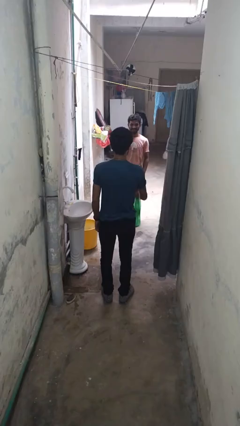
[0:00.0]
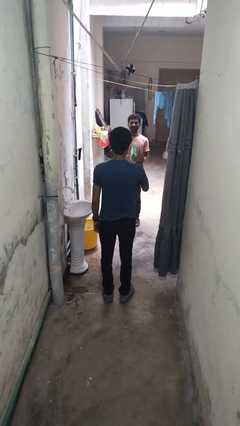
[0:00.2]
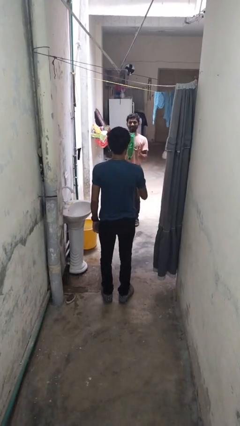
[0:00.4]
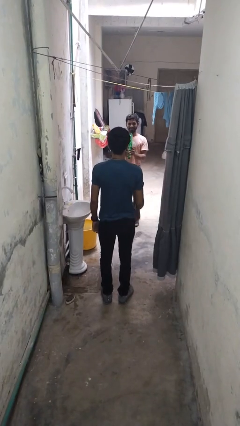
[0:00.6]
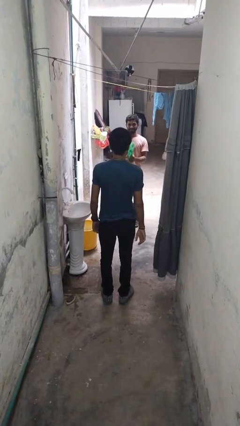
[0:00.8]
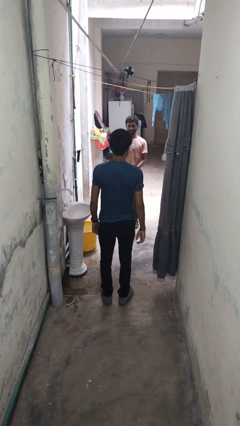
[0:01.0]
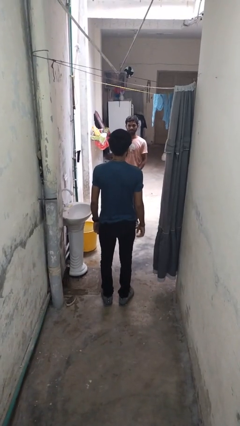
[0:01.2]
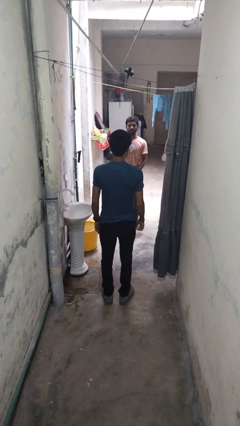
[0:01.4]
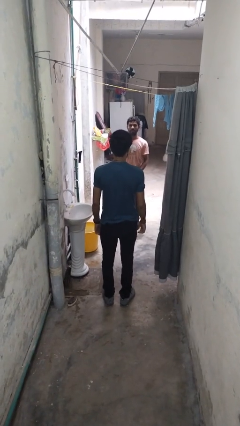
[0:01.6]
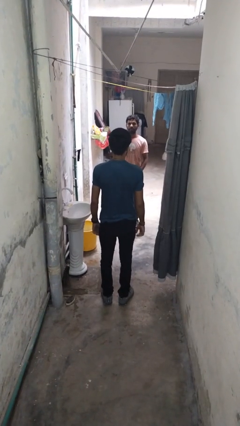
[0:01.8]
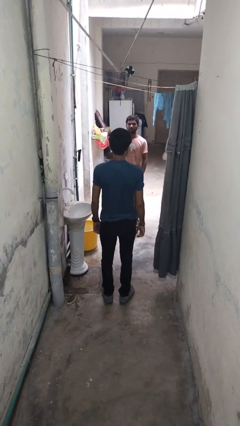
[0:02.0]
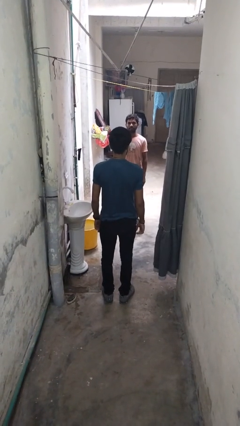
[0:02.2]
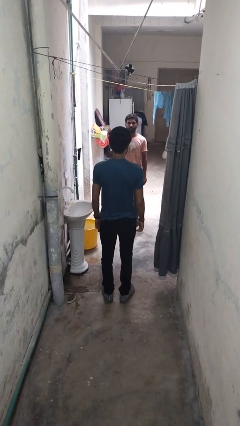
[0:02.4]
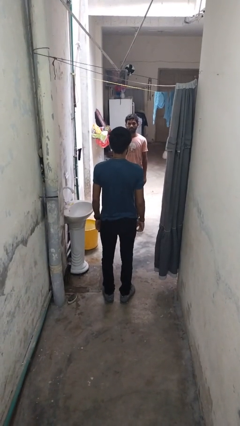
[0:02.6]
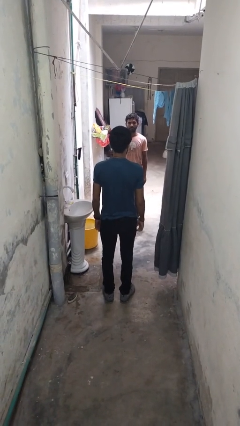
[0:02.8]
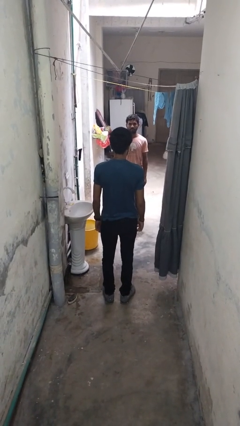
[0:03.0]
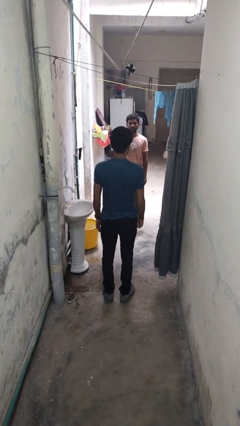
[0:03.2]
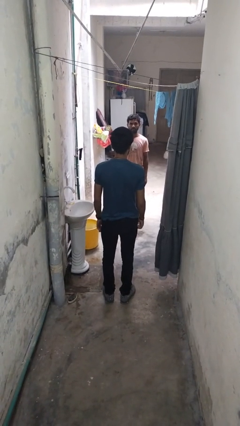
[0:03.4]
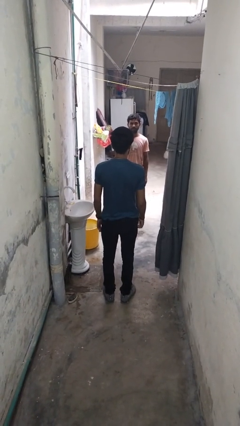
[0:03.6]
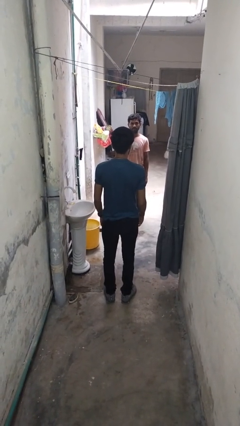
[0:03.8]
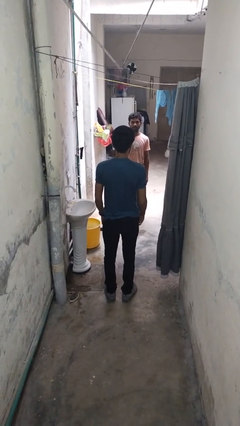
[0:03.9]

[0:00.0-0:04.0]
person throws object to person

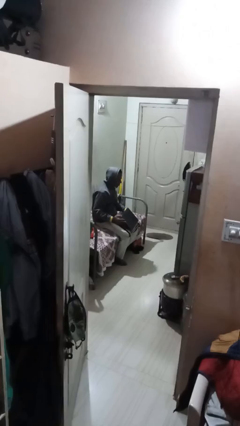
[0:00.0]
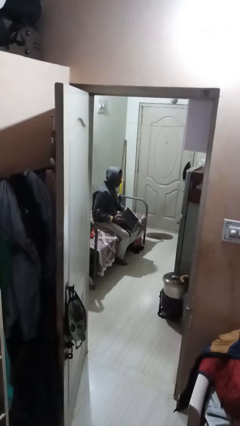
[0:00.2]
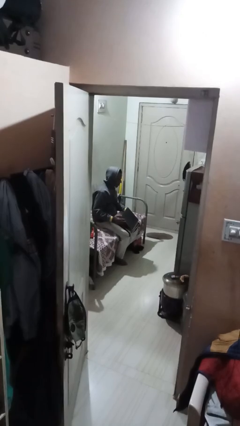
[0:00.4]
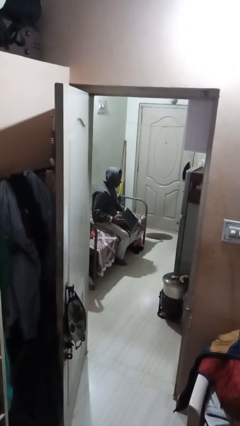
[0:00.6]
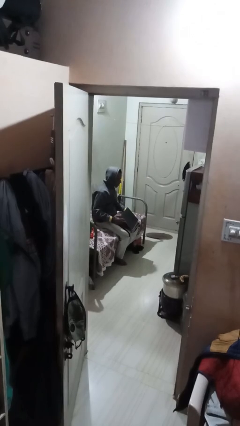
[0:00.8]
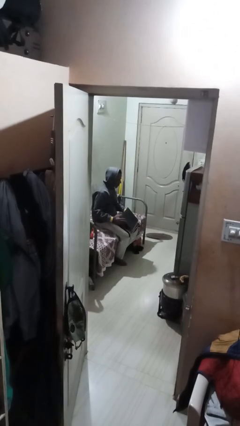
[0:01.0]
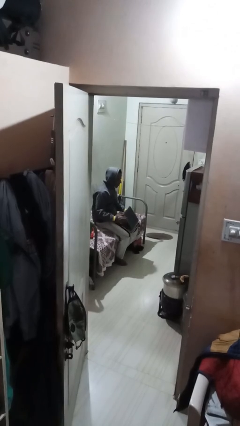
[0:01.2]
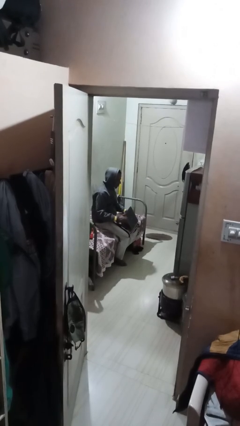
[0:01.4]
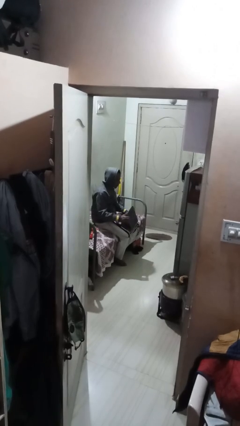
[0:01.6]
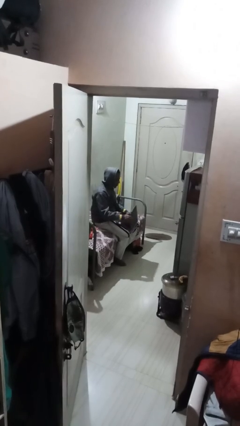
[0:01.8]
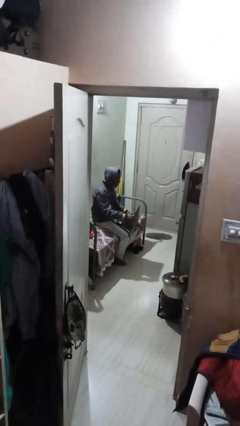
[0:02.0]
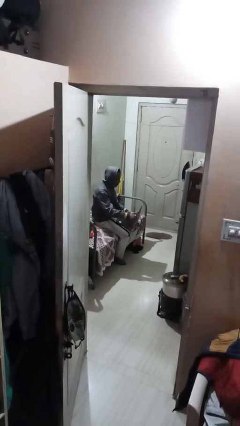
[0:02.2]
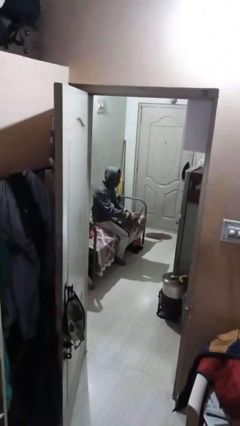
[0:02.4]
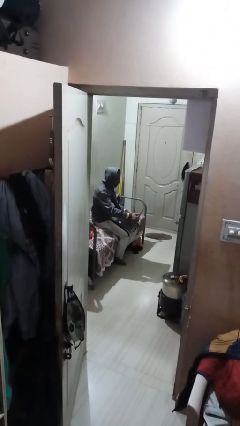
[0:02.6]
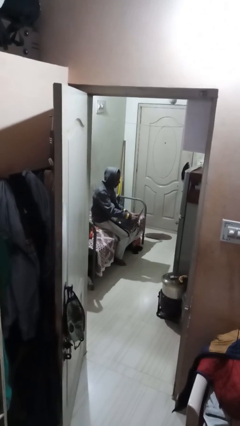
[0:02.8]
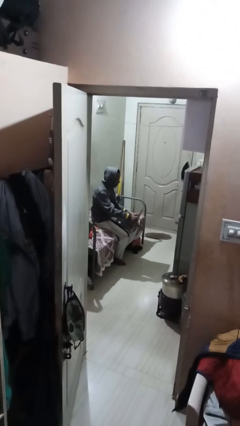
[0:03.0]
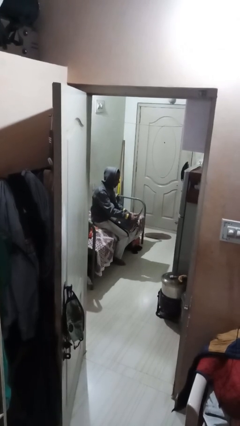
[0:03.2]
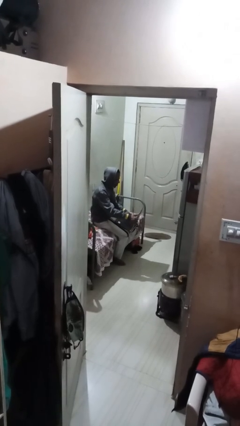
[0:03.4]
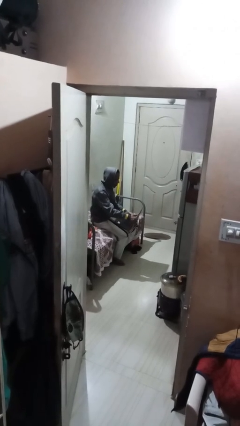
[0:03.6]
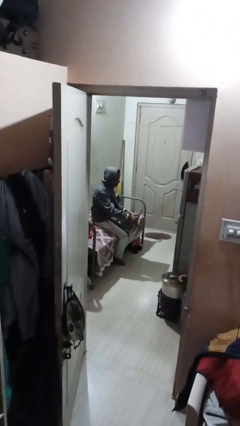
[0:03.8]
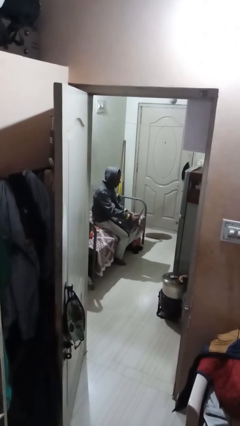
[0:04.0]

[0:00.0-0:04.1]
person interacts with laptop

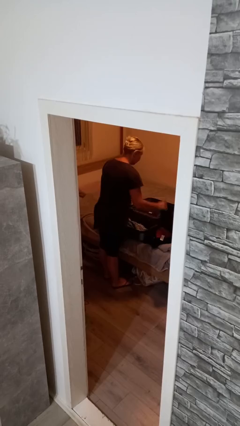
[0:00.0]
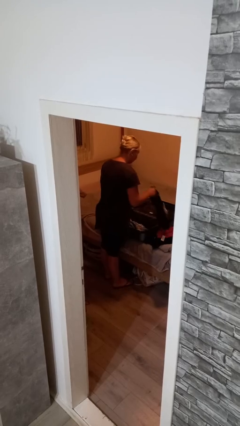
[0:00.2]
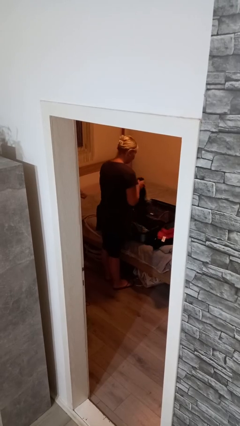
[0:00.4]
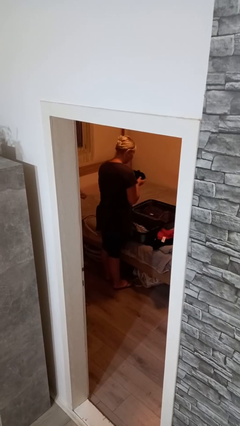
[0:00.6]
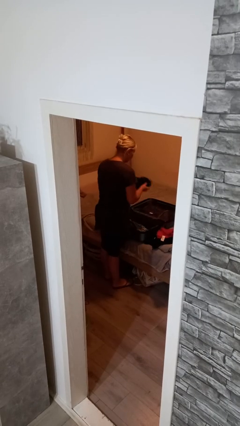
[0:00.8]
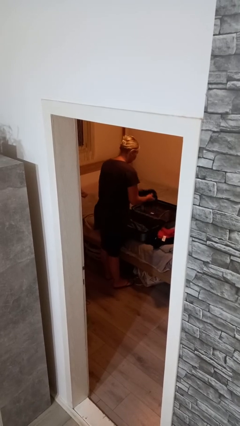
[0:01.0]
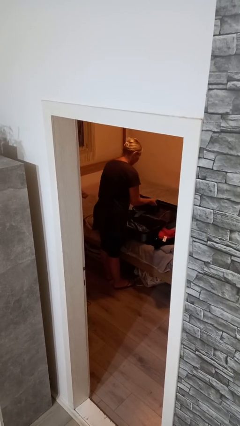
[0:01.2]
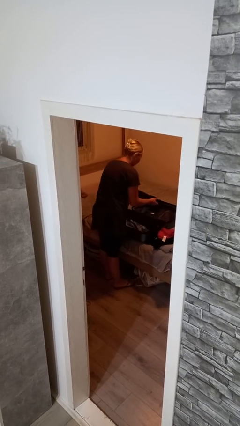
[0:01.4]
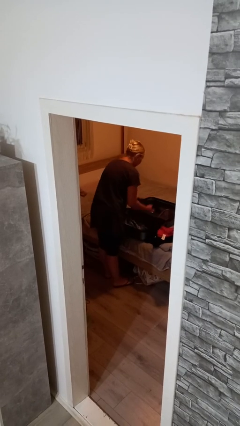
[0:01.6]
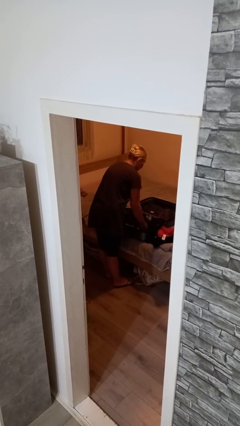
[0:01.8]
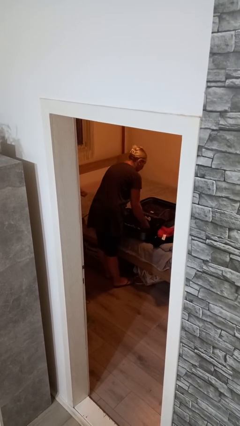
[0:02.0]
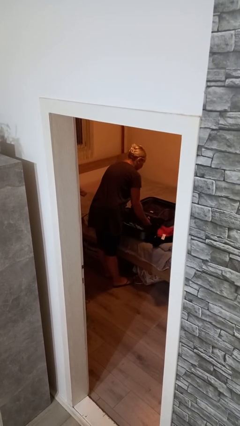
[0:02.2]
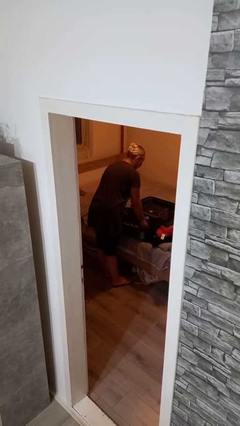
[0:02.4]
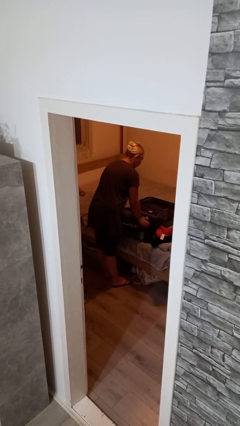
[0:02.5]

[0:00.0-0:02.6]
person loads clothes into suitcase

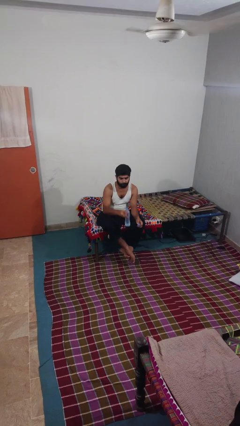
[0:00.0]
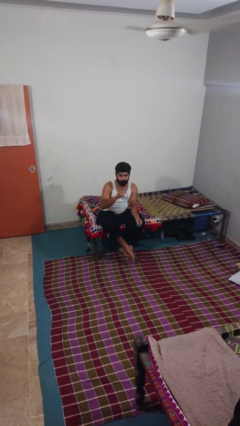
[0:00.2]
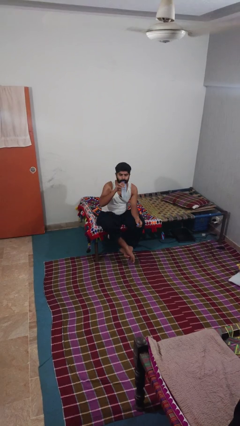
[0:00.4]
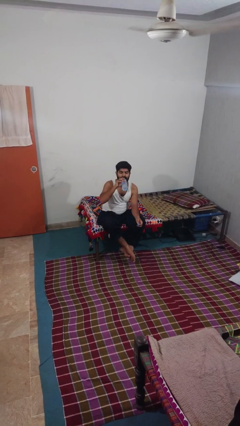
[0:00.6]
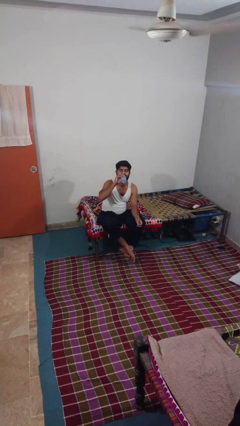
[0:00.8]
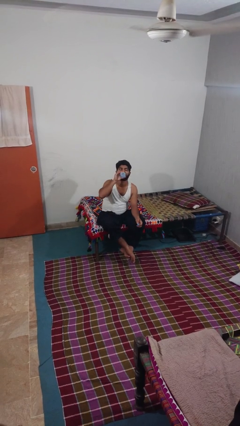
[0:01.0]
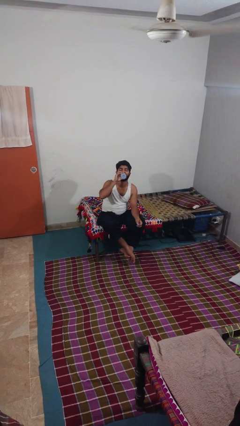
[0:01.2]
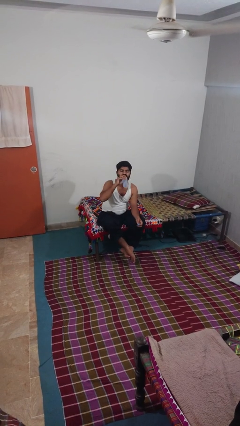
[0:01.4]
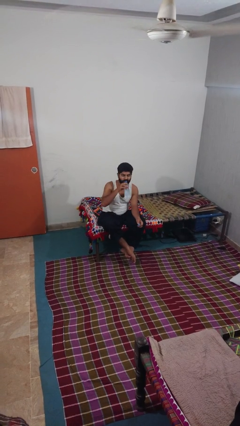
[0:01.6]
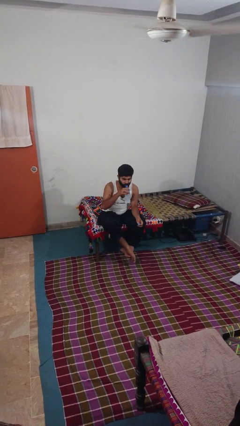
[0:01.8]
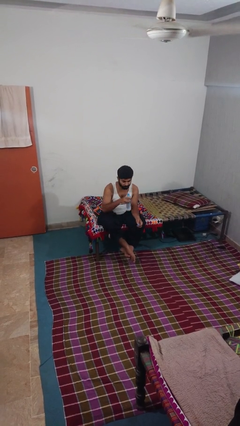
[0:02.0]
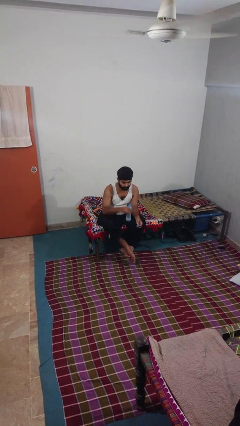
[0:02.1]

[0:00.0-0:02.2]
person drinks from bottle

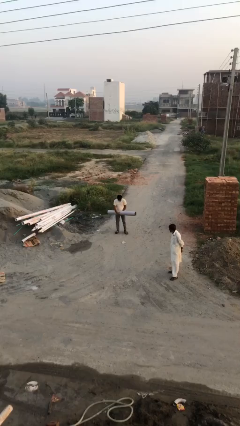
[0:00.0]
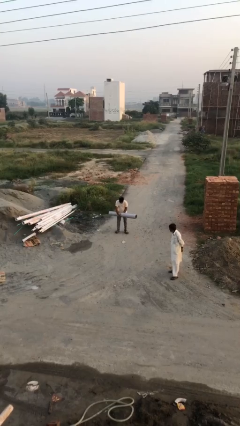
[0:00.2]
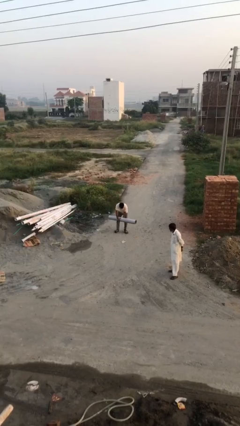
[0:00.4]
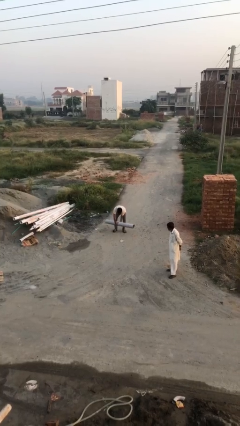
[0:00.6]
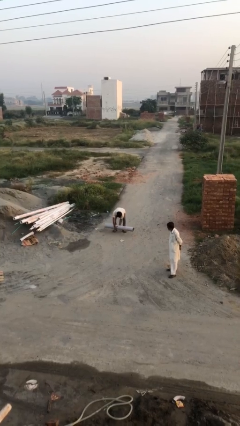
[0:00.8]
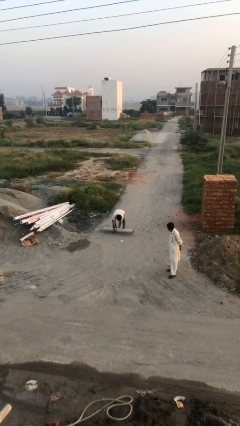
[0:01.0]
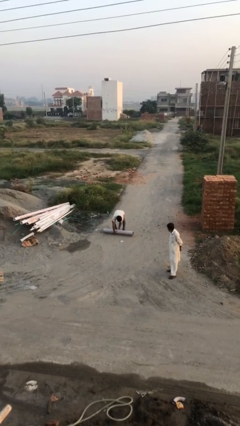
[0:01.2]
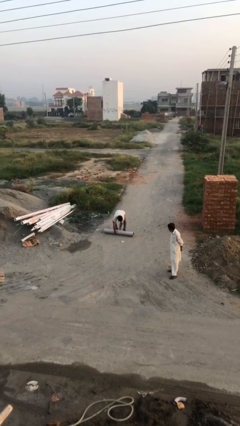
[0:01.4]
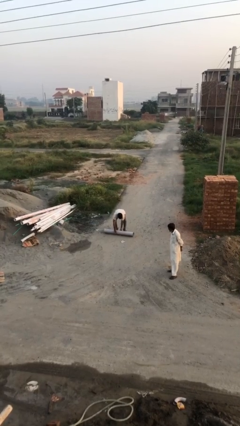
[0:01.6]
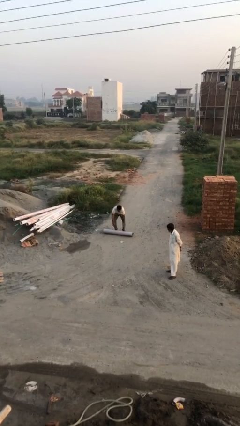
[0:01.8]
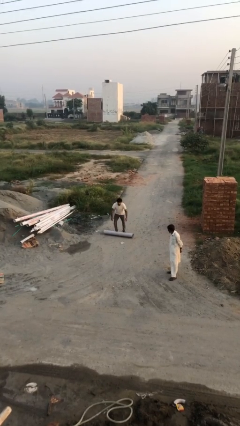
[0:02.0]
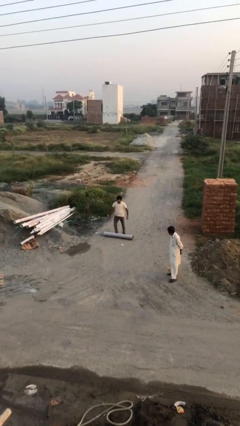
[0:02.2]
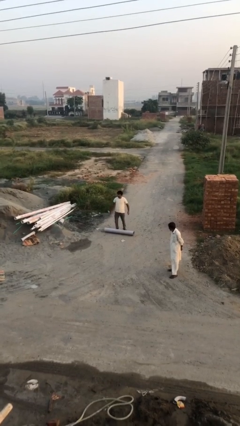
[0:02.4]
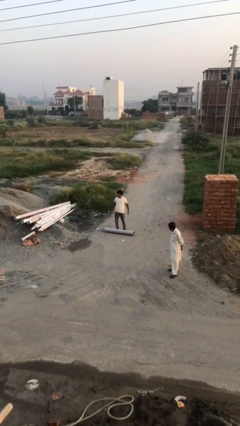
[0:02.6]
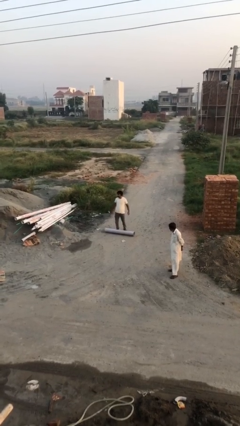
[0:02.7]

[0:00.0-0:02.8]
person puts down object on floor

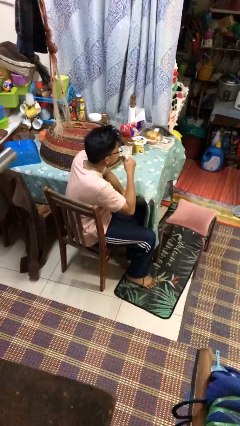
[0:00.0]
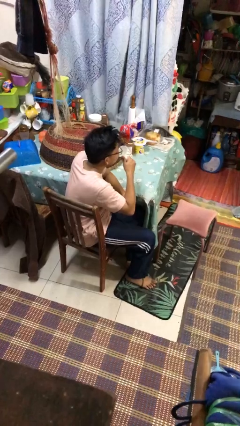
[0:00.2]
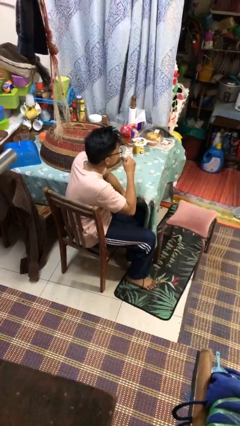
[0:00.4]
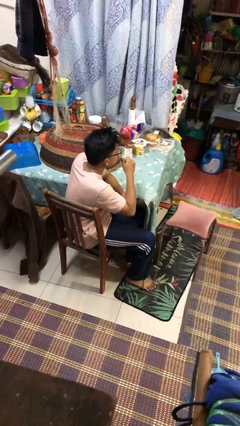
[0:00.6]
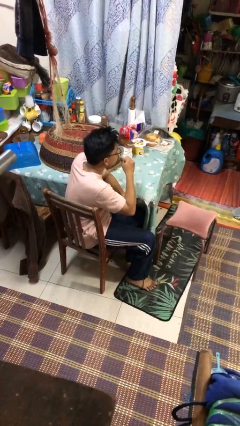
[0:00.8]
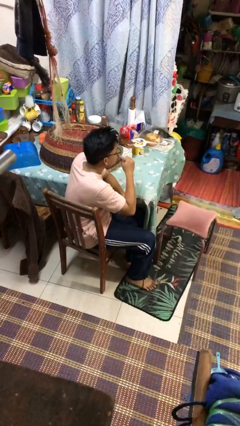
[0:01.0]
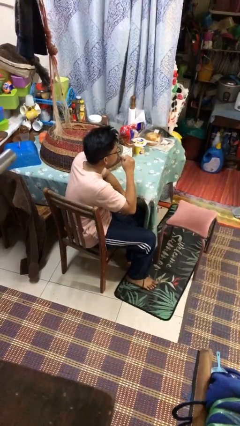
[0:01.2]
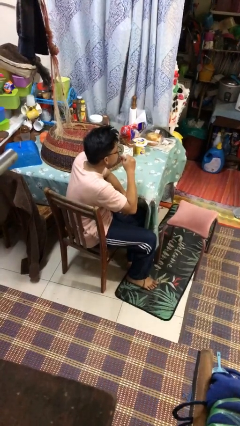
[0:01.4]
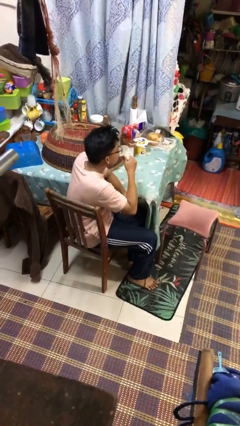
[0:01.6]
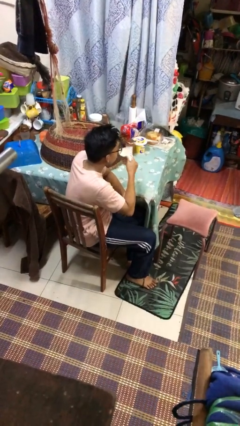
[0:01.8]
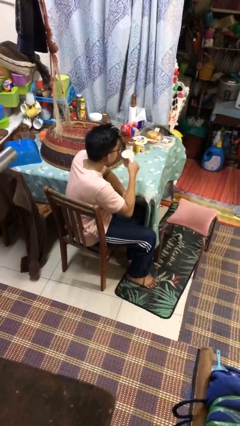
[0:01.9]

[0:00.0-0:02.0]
person drinks from mug
